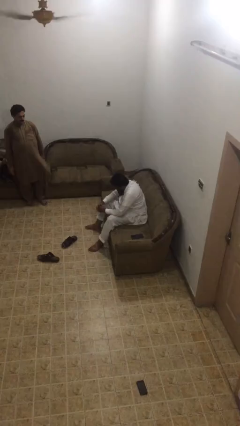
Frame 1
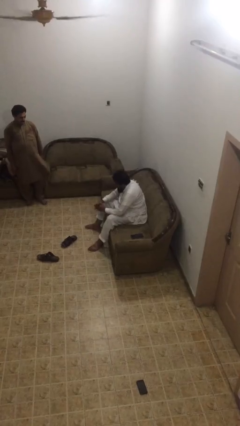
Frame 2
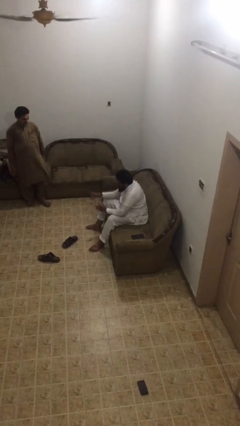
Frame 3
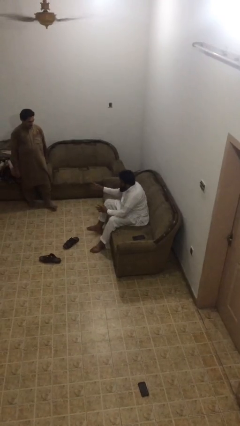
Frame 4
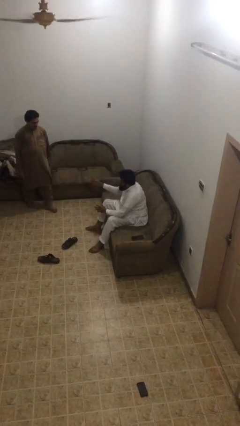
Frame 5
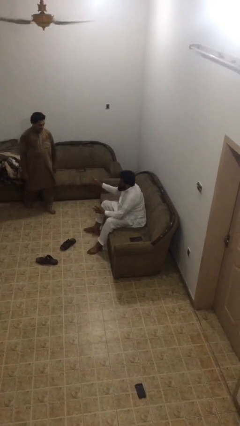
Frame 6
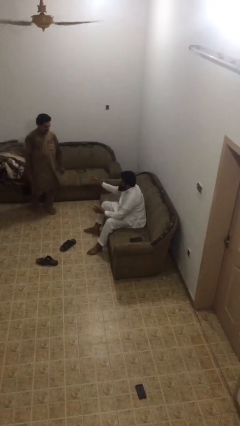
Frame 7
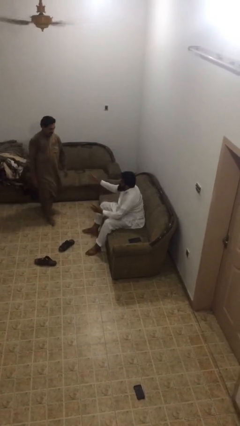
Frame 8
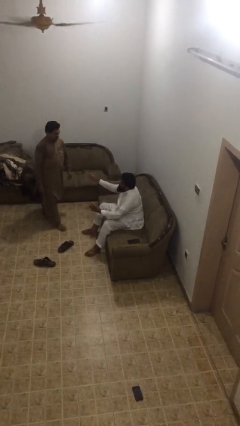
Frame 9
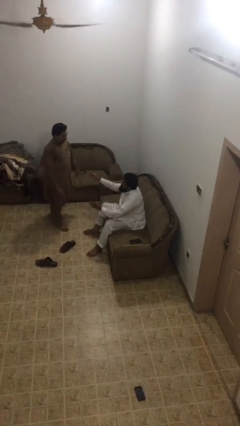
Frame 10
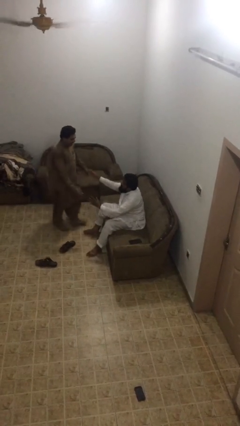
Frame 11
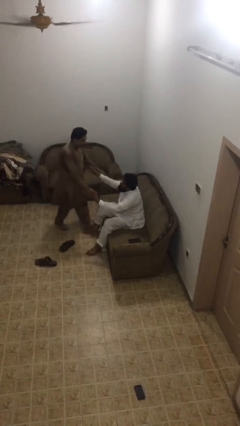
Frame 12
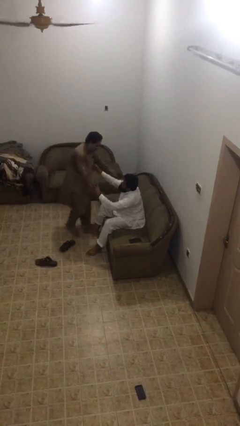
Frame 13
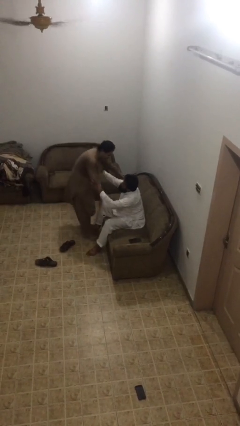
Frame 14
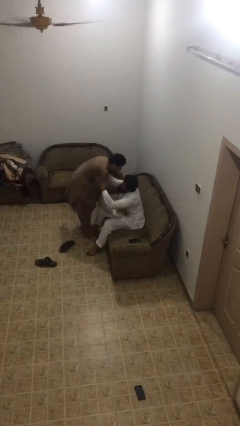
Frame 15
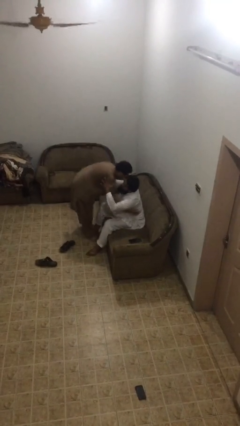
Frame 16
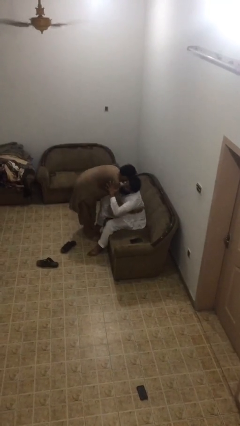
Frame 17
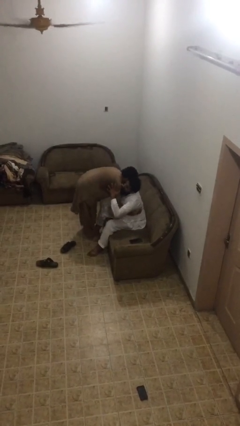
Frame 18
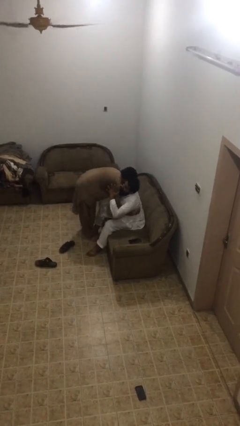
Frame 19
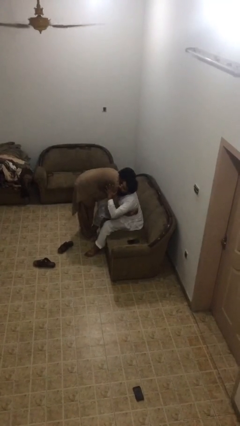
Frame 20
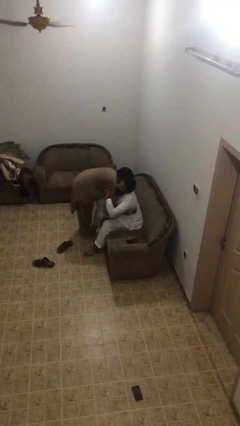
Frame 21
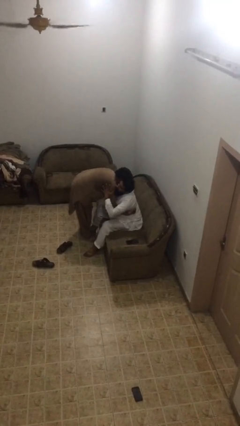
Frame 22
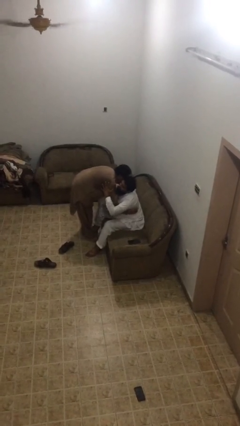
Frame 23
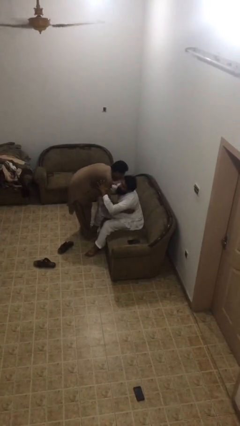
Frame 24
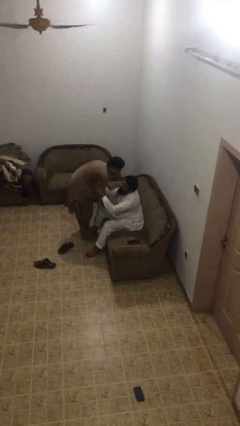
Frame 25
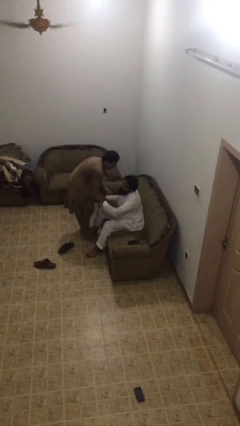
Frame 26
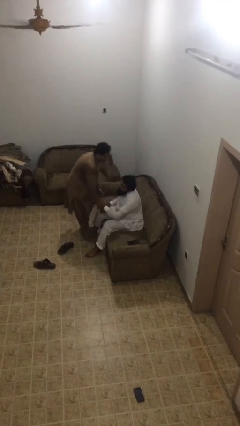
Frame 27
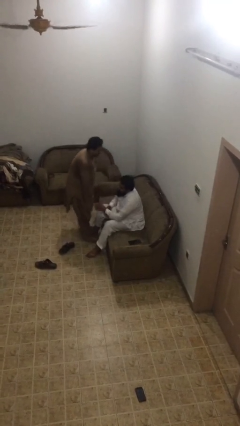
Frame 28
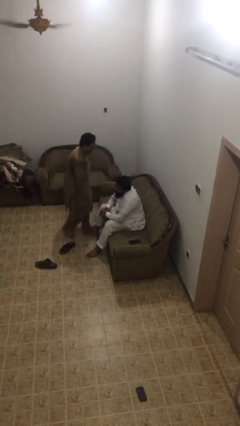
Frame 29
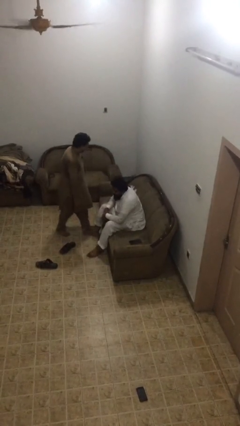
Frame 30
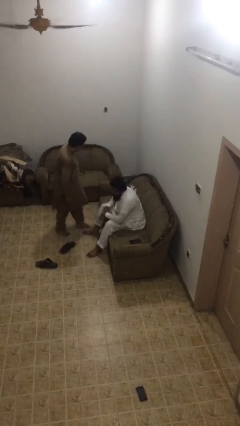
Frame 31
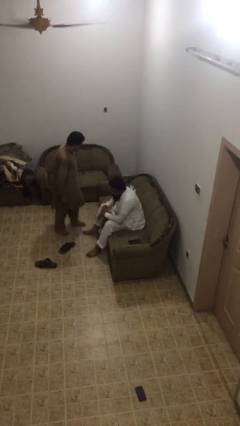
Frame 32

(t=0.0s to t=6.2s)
person embraces person

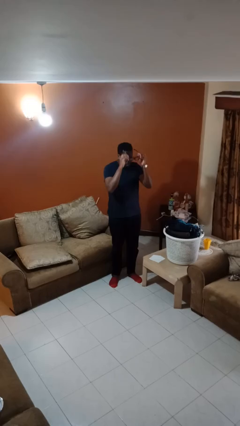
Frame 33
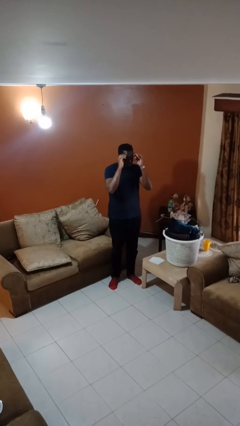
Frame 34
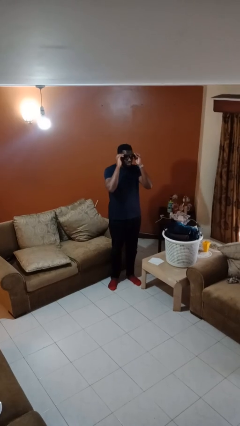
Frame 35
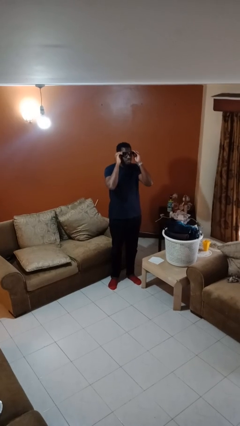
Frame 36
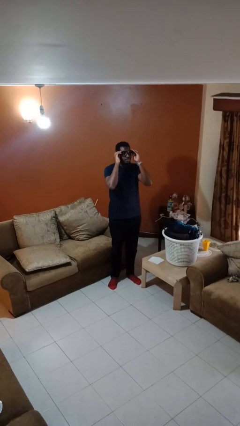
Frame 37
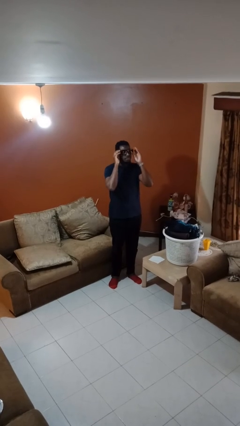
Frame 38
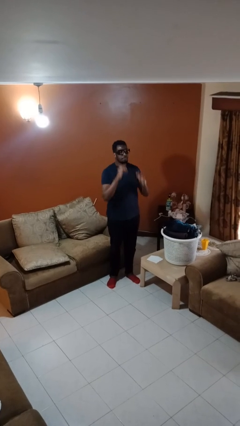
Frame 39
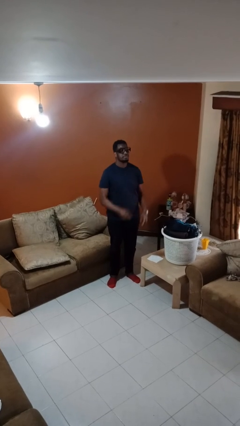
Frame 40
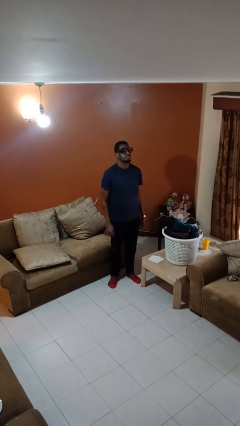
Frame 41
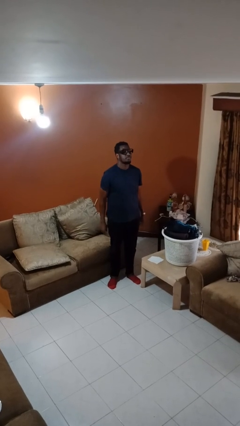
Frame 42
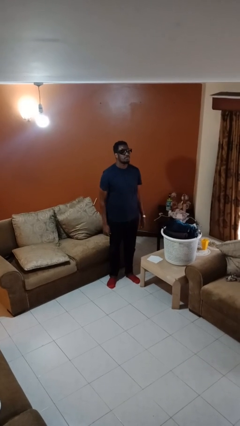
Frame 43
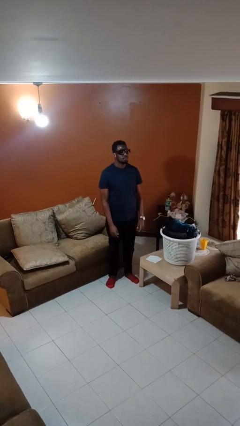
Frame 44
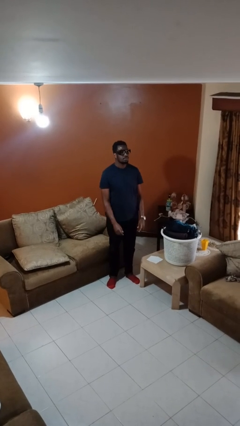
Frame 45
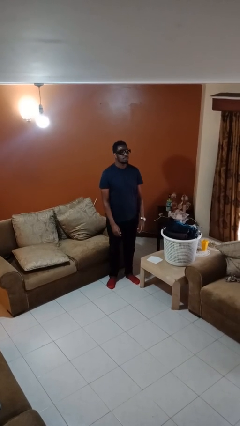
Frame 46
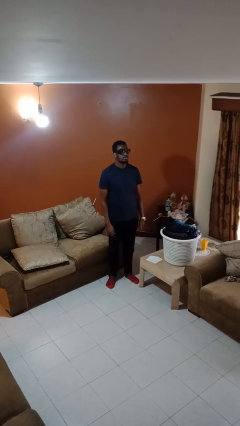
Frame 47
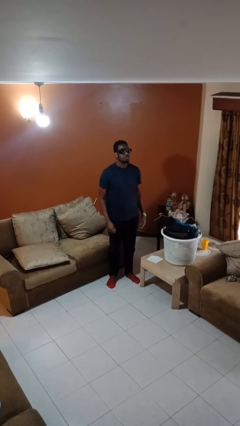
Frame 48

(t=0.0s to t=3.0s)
person puts on glasses

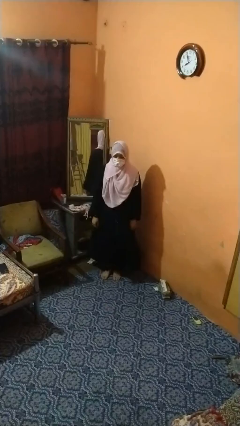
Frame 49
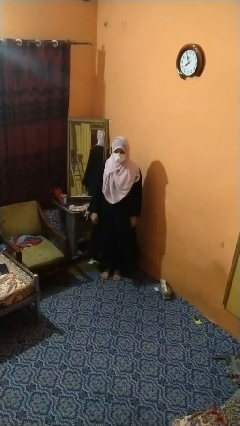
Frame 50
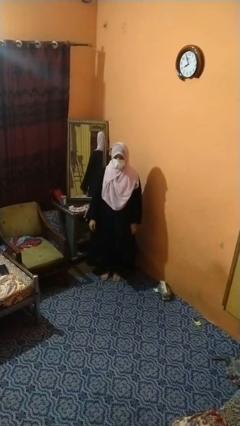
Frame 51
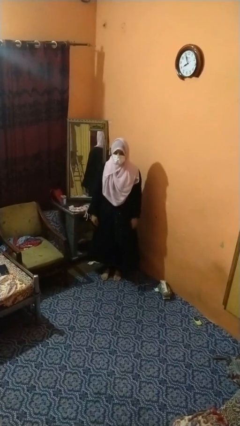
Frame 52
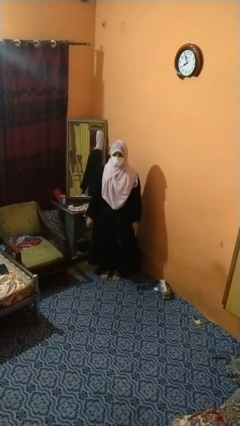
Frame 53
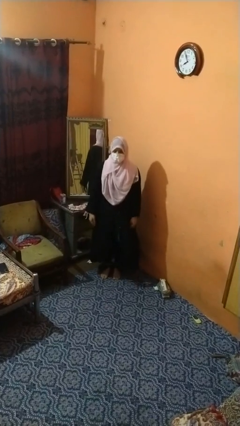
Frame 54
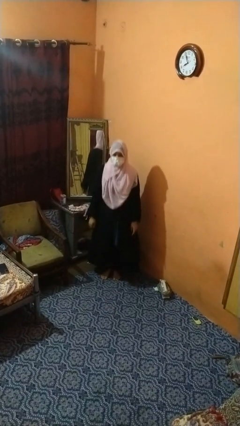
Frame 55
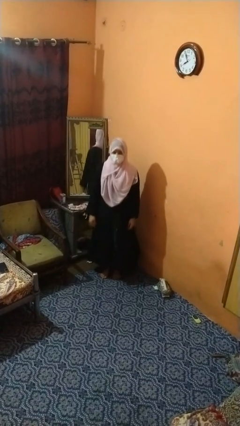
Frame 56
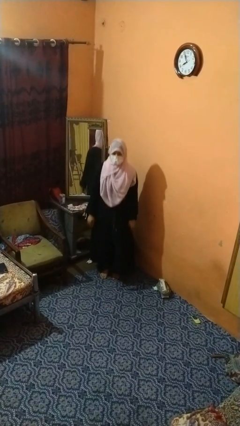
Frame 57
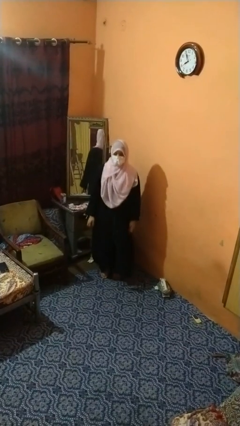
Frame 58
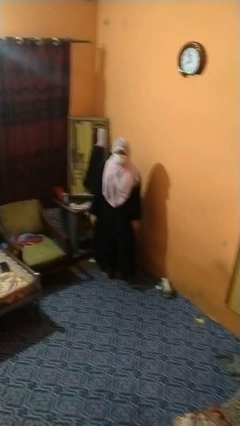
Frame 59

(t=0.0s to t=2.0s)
person jumps

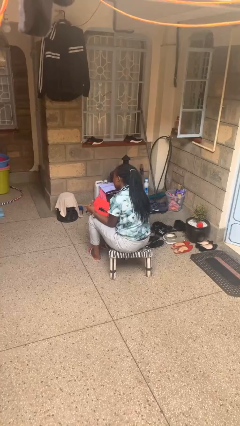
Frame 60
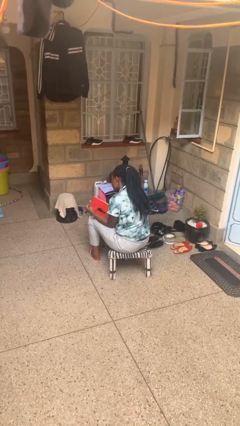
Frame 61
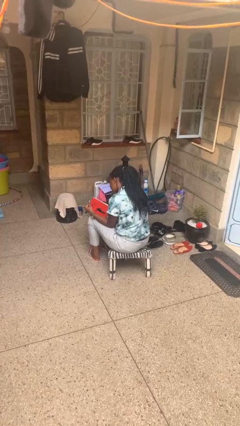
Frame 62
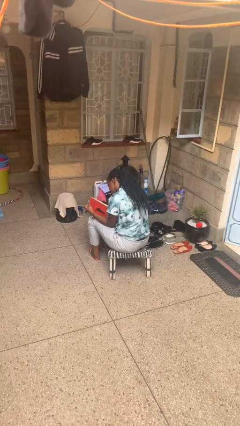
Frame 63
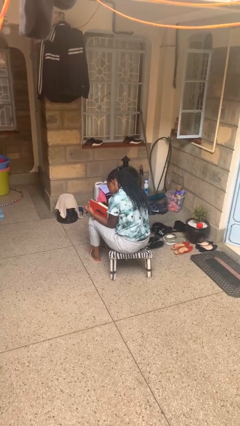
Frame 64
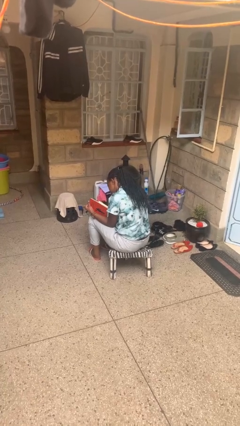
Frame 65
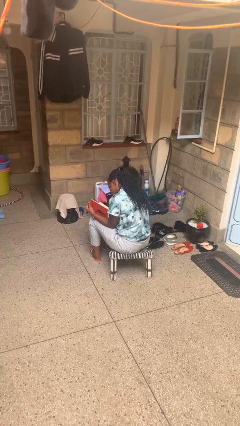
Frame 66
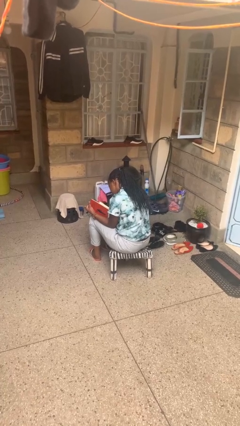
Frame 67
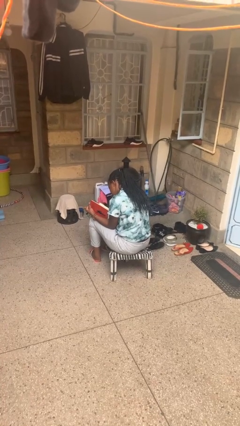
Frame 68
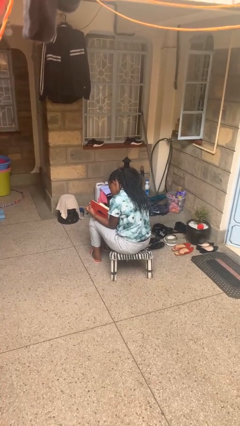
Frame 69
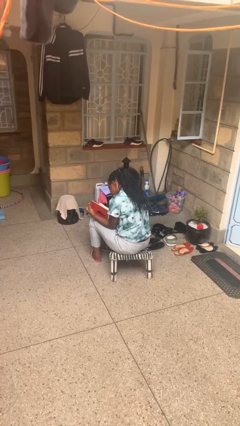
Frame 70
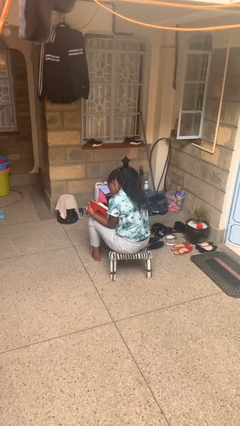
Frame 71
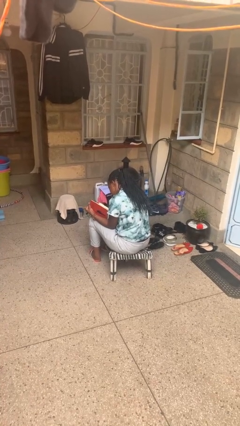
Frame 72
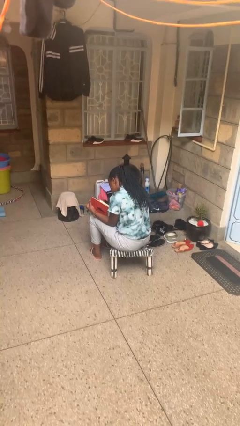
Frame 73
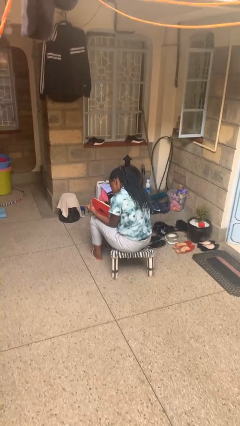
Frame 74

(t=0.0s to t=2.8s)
person reads book

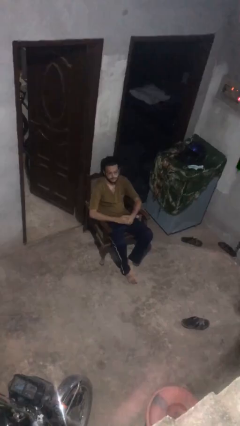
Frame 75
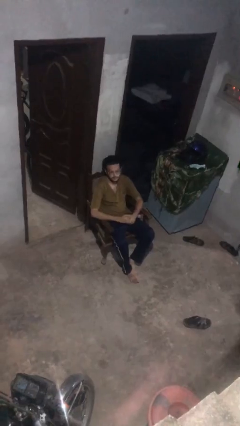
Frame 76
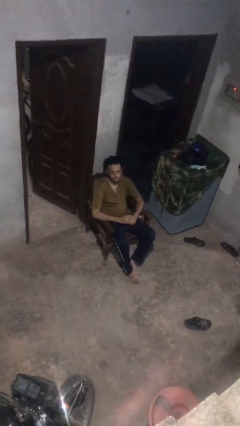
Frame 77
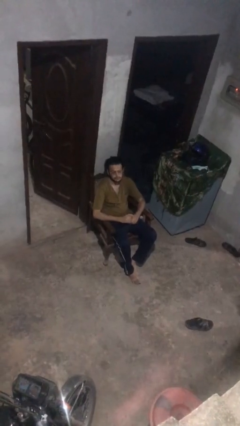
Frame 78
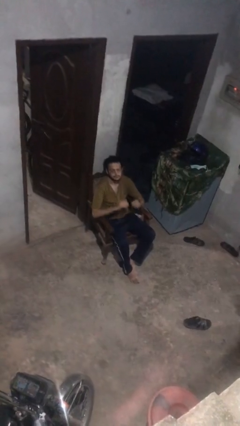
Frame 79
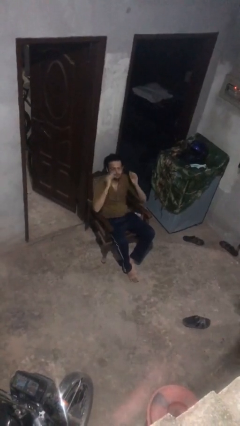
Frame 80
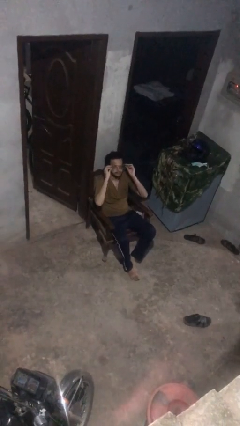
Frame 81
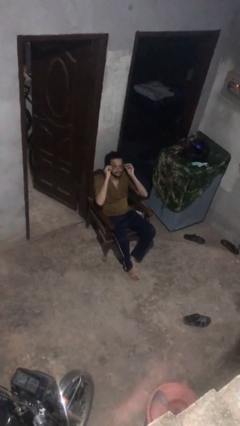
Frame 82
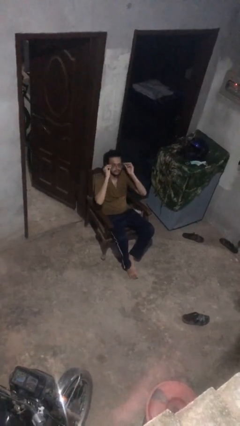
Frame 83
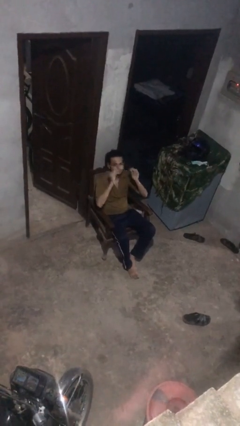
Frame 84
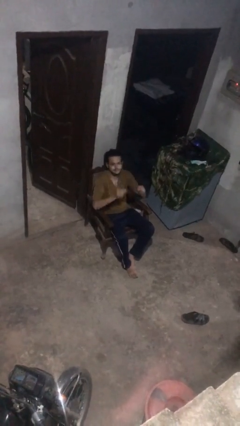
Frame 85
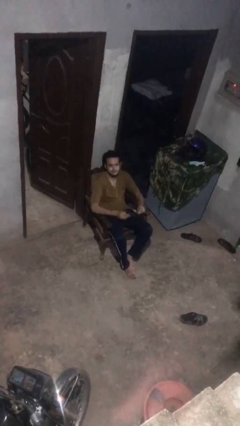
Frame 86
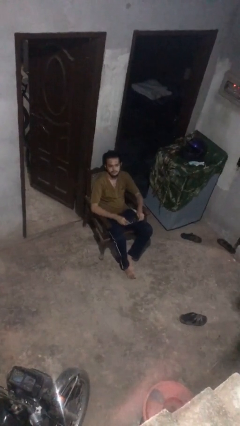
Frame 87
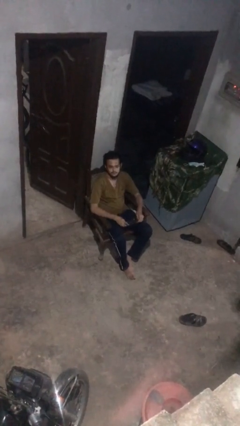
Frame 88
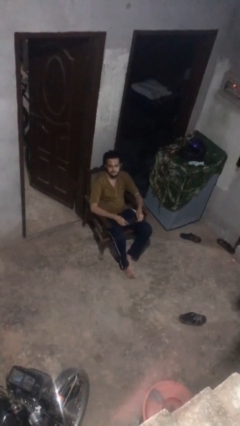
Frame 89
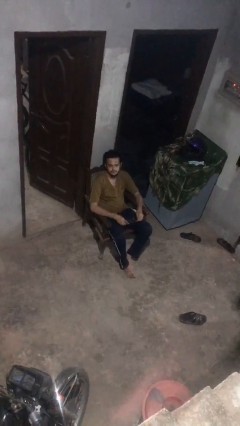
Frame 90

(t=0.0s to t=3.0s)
person takes off glasses

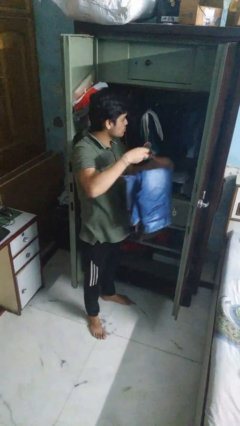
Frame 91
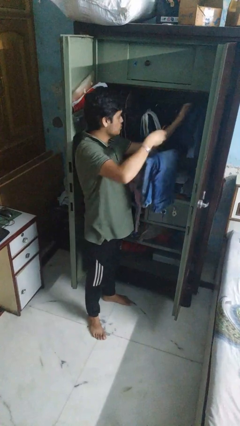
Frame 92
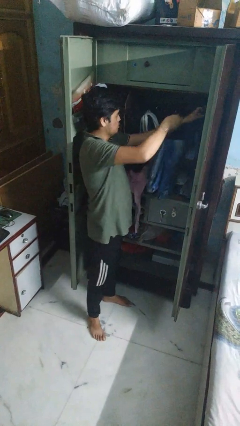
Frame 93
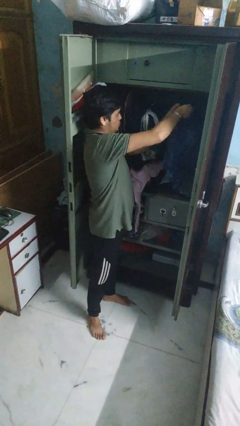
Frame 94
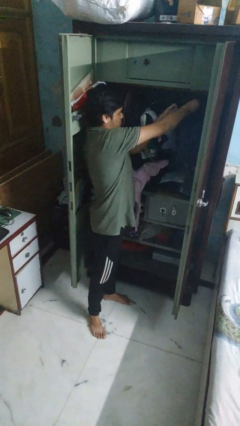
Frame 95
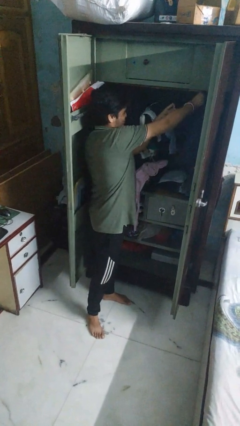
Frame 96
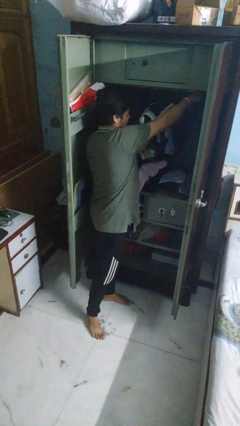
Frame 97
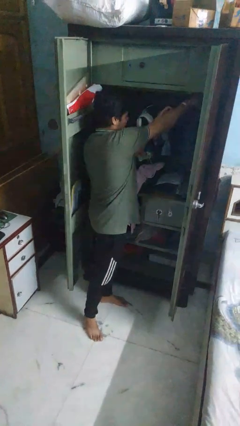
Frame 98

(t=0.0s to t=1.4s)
person puts clothes into closet
